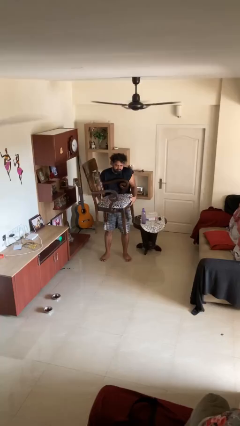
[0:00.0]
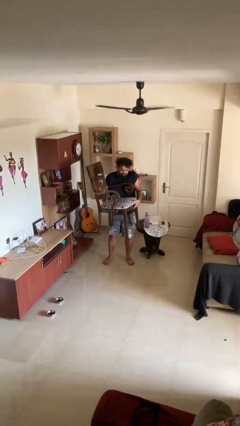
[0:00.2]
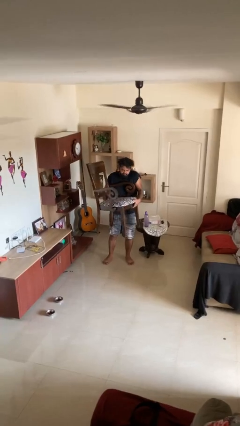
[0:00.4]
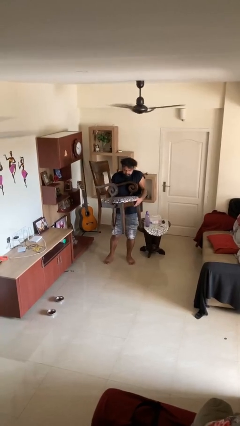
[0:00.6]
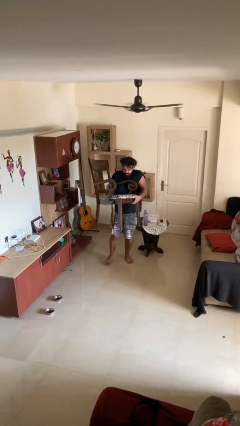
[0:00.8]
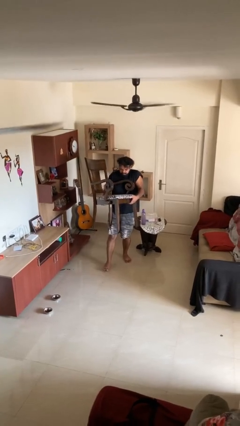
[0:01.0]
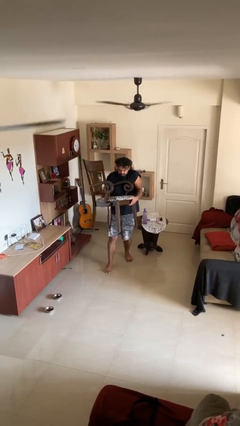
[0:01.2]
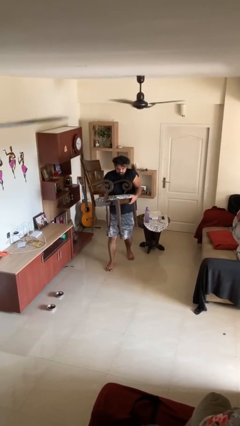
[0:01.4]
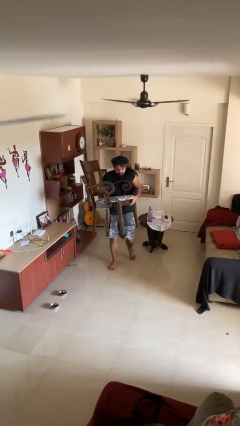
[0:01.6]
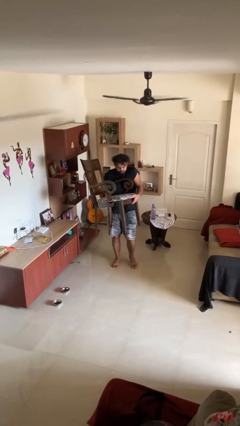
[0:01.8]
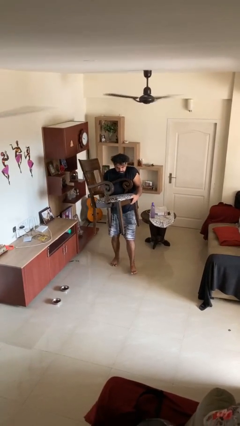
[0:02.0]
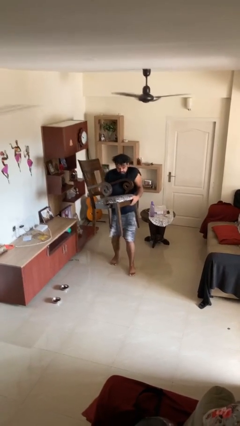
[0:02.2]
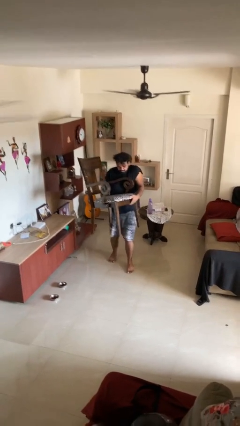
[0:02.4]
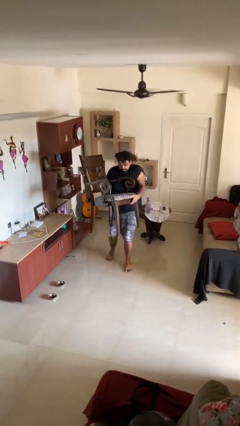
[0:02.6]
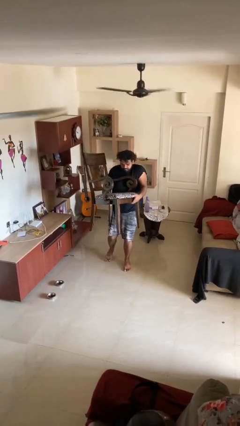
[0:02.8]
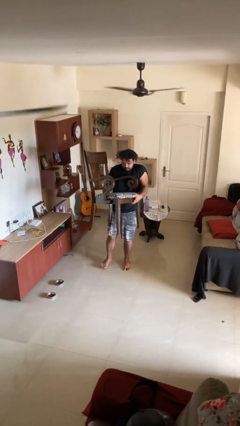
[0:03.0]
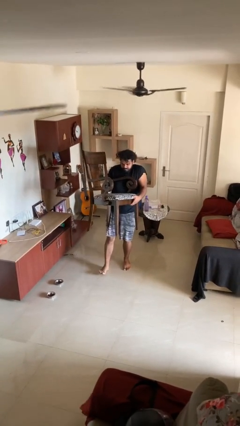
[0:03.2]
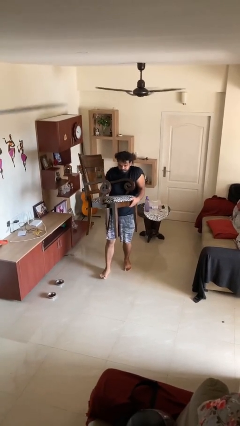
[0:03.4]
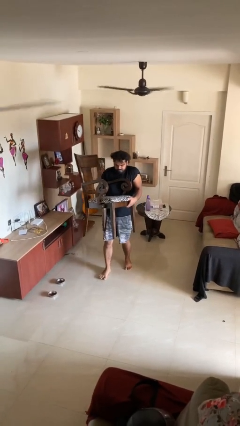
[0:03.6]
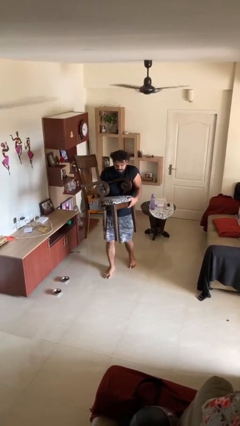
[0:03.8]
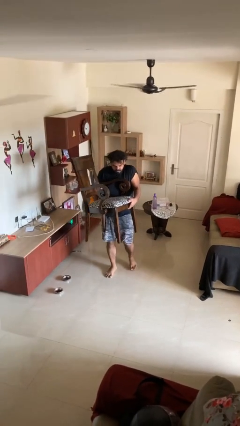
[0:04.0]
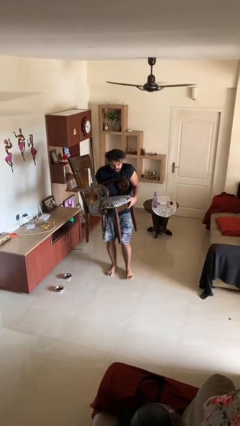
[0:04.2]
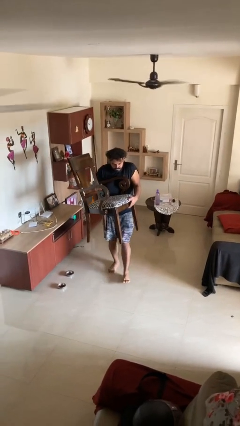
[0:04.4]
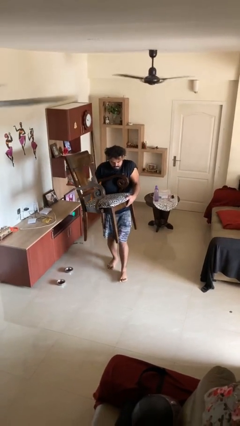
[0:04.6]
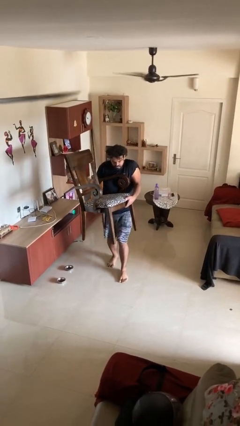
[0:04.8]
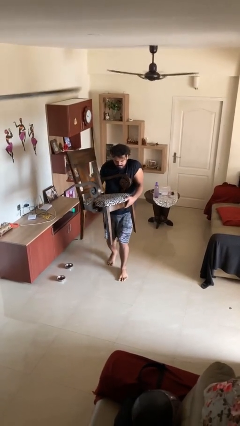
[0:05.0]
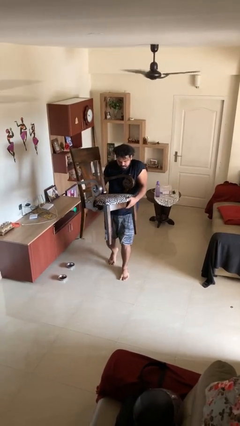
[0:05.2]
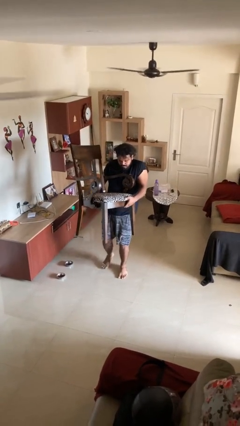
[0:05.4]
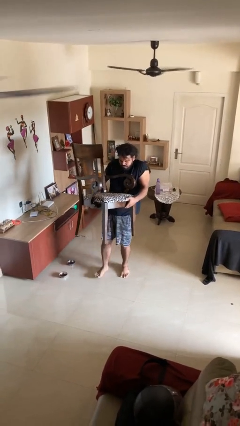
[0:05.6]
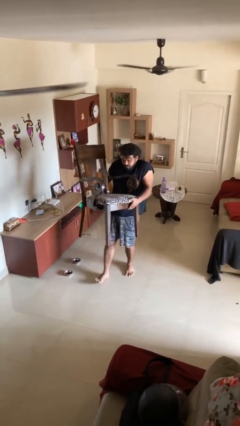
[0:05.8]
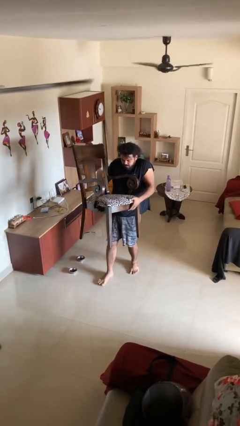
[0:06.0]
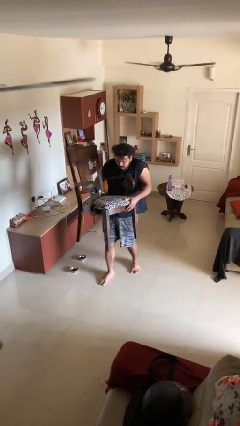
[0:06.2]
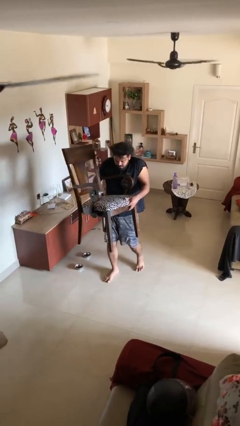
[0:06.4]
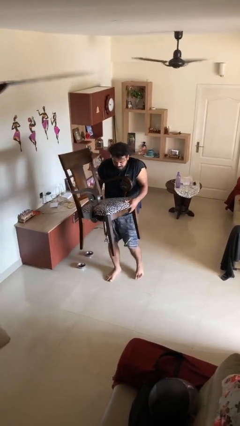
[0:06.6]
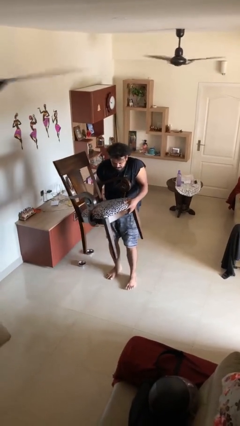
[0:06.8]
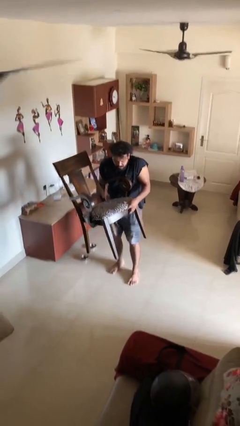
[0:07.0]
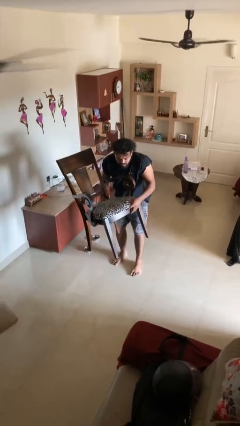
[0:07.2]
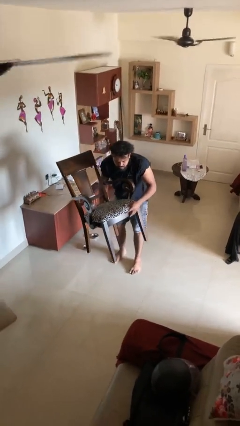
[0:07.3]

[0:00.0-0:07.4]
person carries heavy object

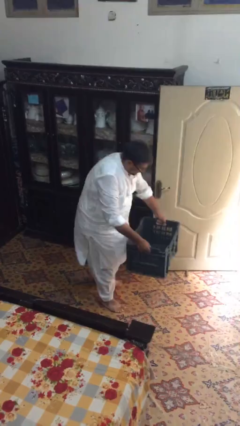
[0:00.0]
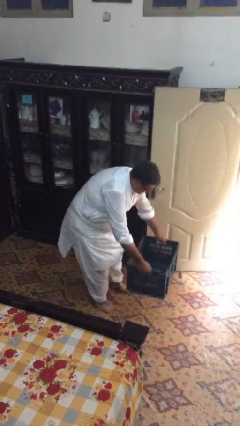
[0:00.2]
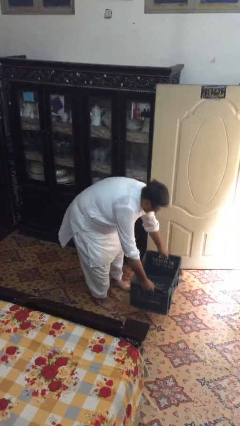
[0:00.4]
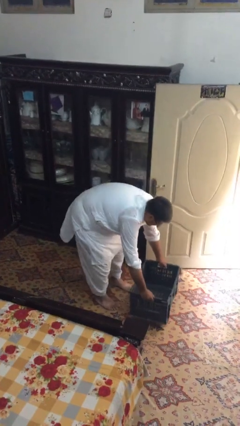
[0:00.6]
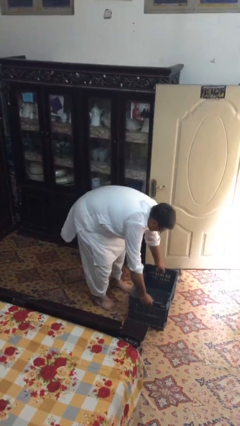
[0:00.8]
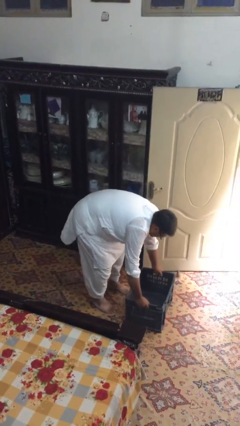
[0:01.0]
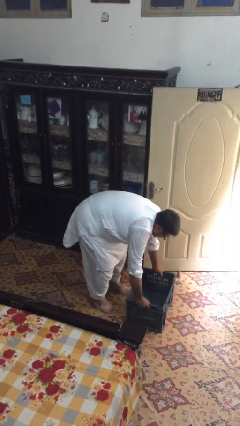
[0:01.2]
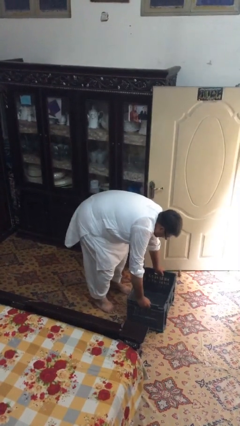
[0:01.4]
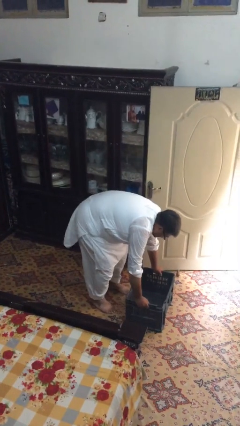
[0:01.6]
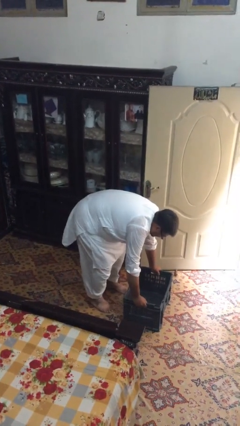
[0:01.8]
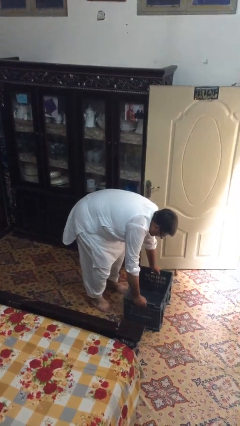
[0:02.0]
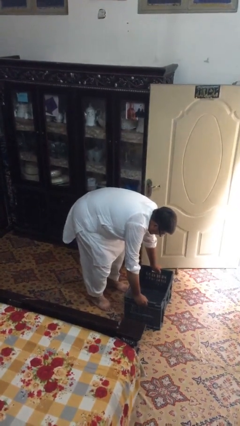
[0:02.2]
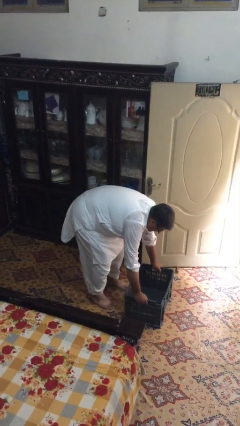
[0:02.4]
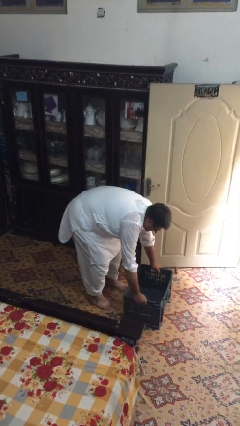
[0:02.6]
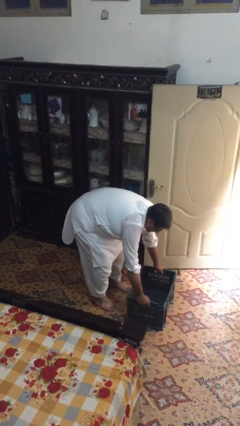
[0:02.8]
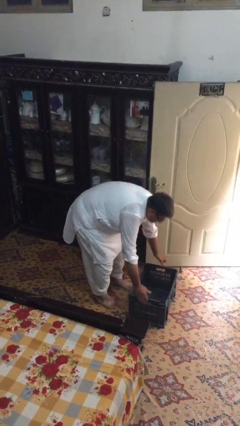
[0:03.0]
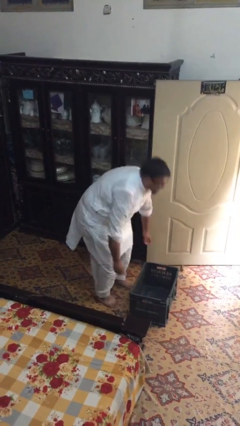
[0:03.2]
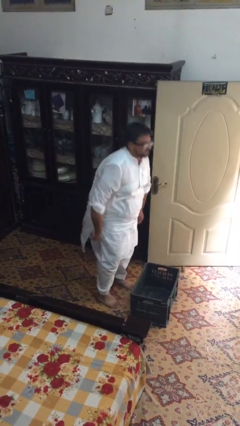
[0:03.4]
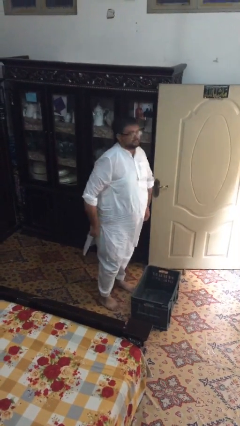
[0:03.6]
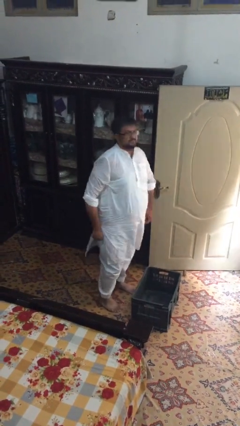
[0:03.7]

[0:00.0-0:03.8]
person puts down object on floor

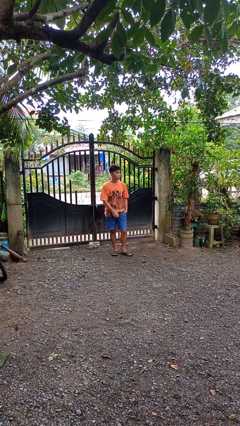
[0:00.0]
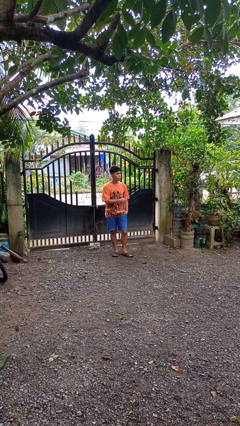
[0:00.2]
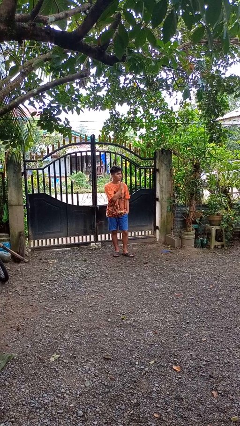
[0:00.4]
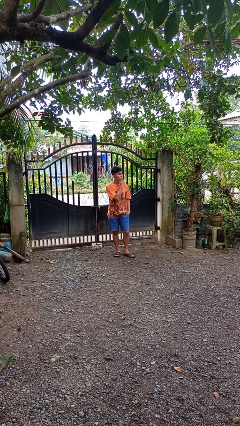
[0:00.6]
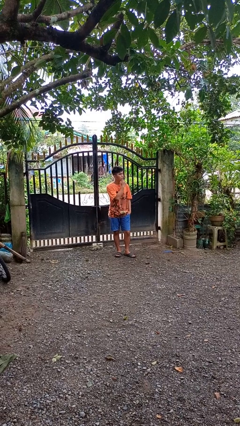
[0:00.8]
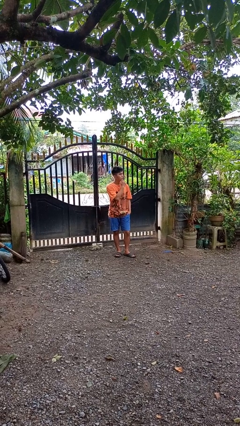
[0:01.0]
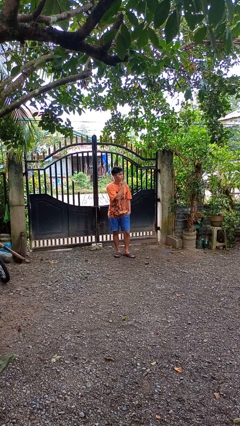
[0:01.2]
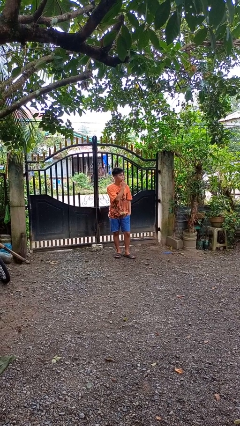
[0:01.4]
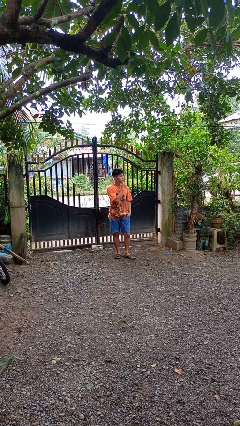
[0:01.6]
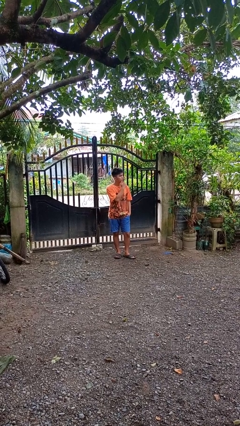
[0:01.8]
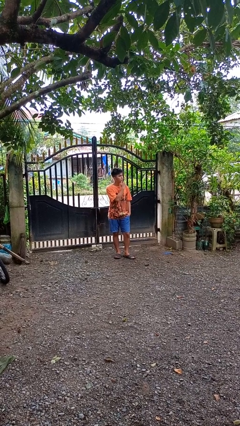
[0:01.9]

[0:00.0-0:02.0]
person strokes chin

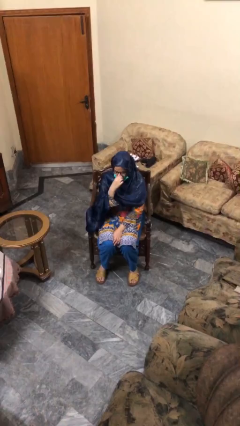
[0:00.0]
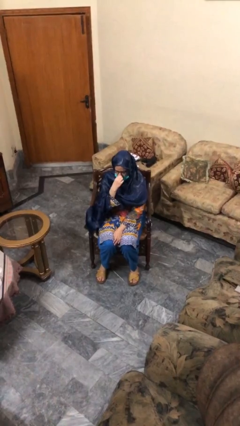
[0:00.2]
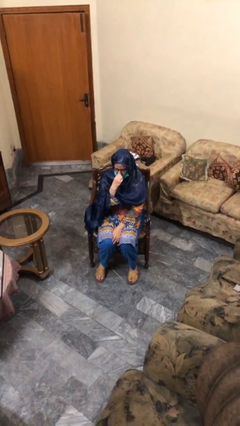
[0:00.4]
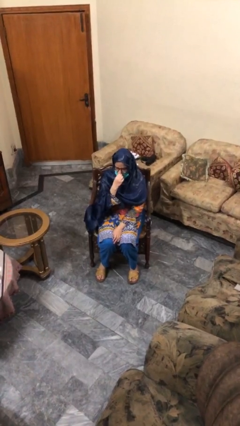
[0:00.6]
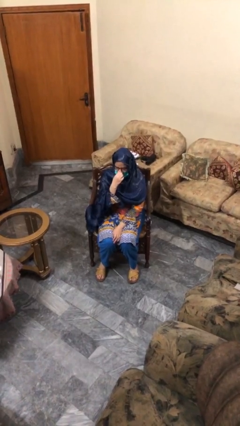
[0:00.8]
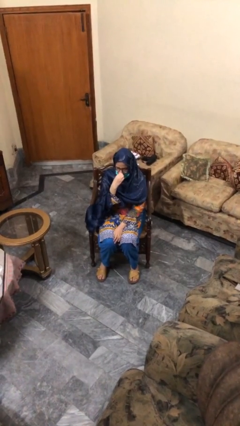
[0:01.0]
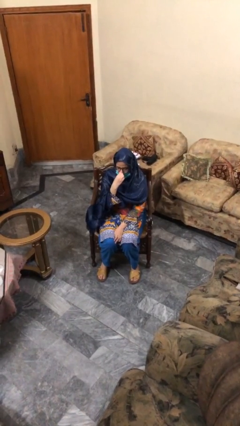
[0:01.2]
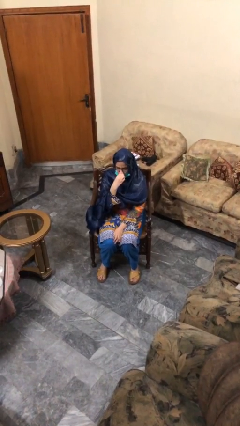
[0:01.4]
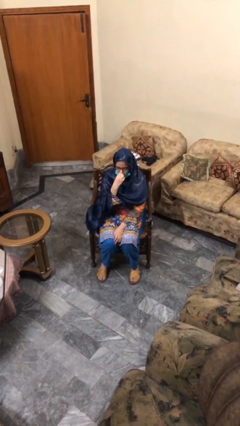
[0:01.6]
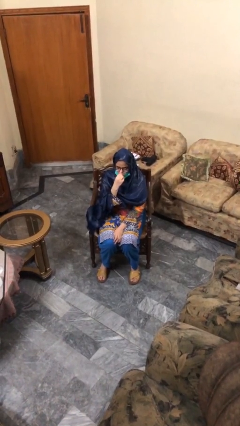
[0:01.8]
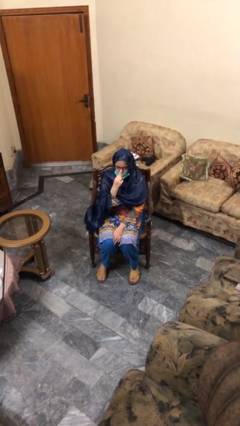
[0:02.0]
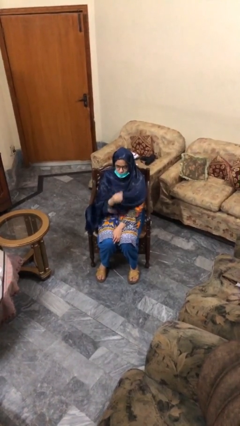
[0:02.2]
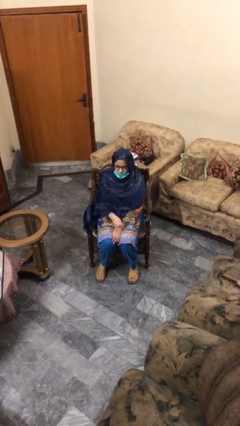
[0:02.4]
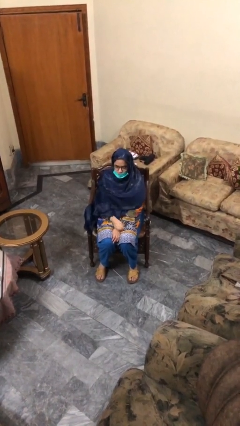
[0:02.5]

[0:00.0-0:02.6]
person blows nose

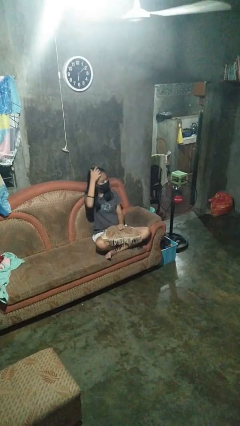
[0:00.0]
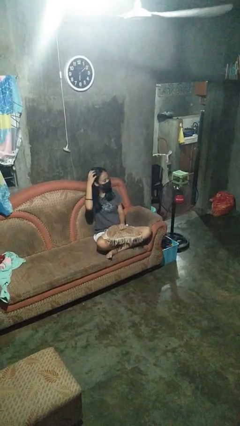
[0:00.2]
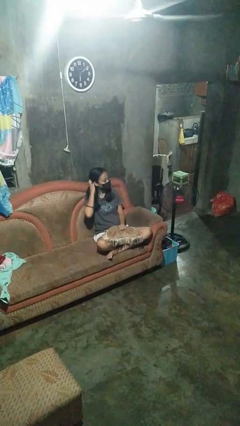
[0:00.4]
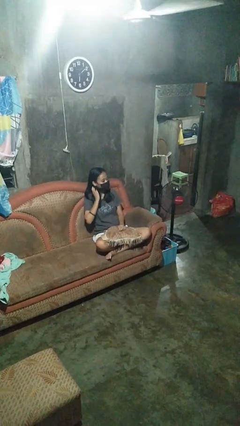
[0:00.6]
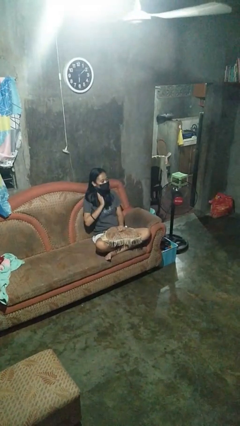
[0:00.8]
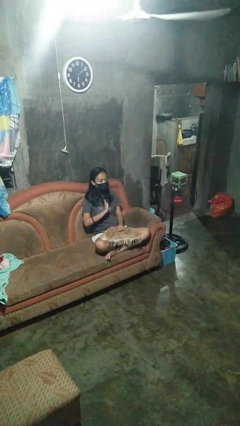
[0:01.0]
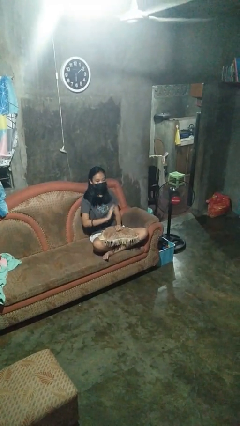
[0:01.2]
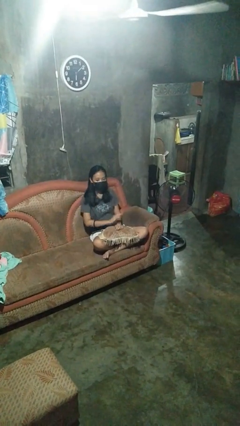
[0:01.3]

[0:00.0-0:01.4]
person strokes hair

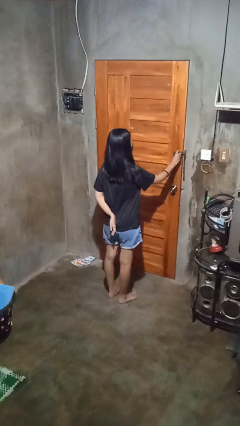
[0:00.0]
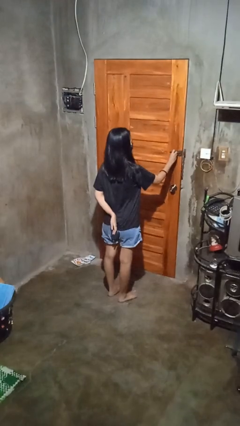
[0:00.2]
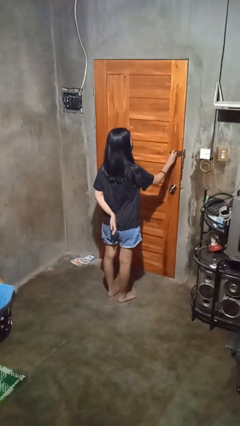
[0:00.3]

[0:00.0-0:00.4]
person unlocks door with keys
